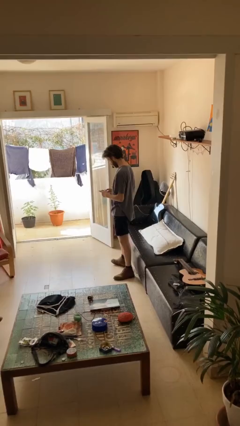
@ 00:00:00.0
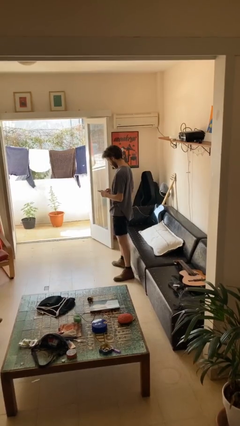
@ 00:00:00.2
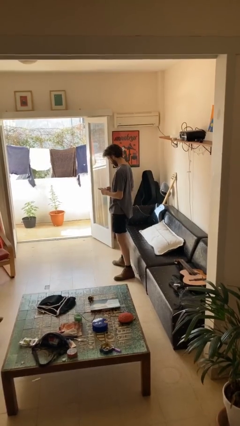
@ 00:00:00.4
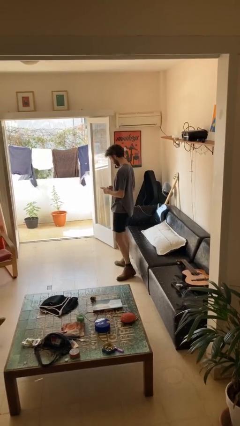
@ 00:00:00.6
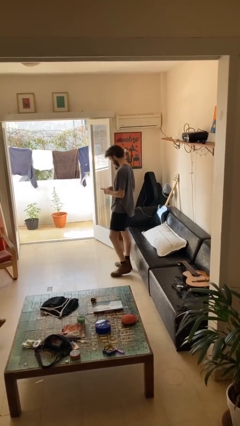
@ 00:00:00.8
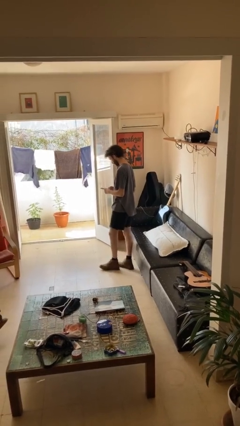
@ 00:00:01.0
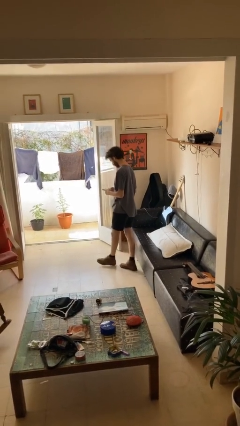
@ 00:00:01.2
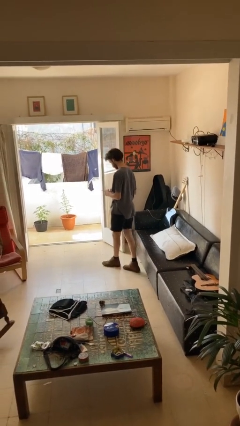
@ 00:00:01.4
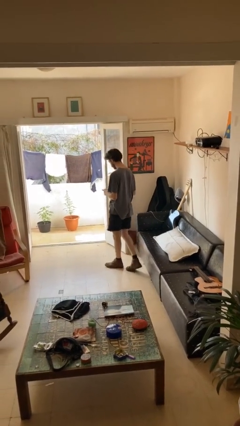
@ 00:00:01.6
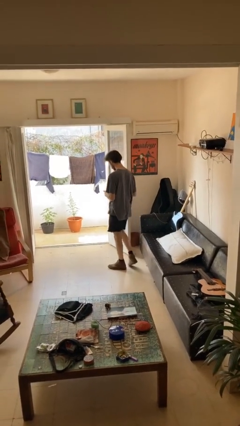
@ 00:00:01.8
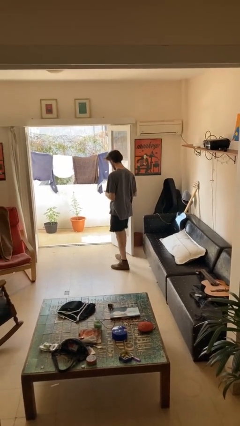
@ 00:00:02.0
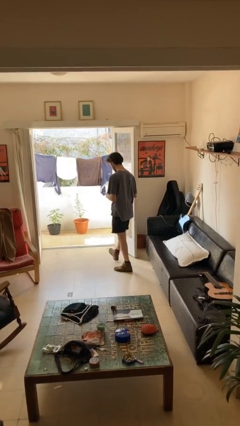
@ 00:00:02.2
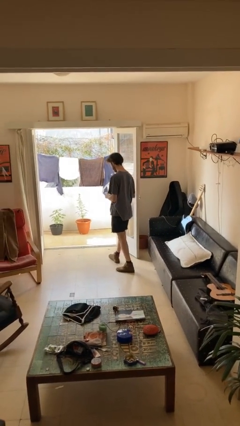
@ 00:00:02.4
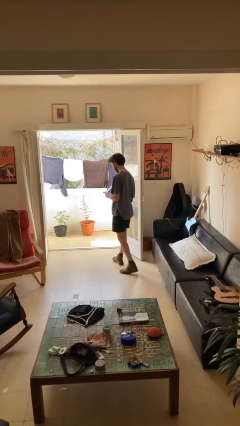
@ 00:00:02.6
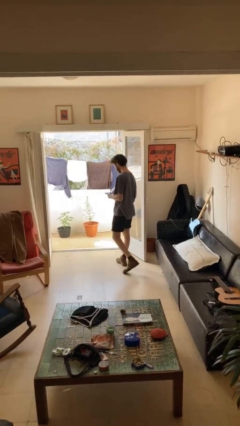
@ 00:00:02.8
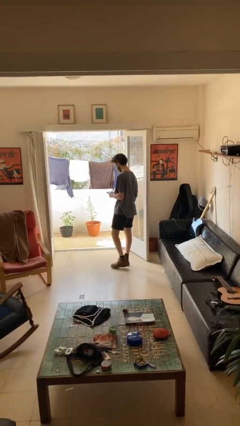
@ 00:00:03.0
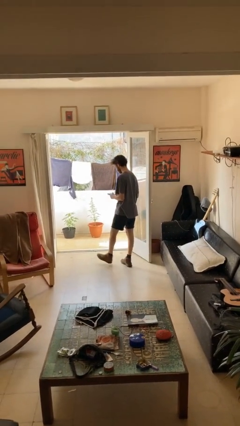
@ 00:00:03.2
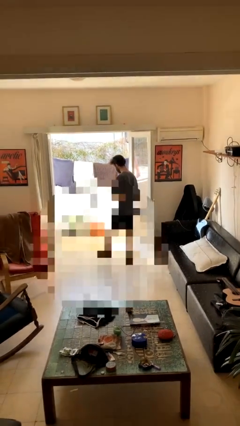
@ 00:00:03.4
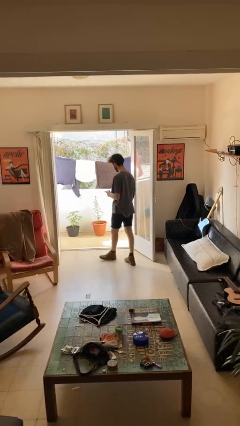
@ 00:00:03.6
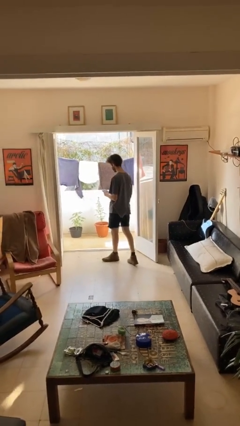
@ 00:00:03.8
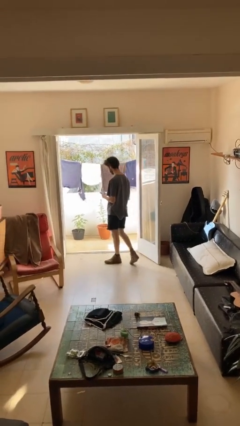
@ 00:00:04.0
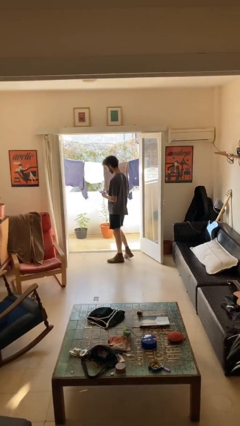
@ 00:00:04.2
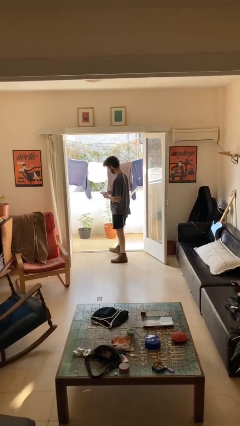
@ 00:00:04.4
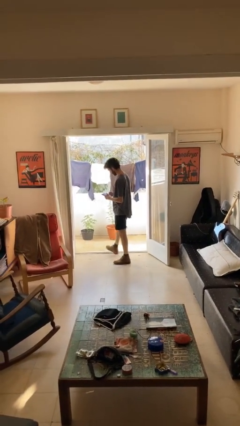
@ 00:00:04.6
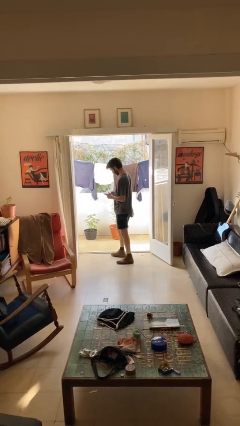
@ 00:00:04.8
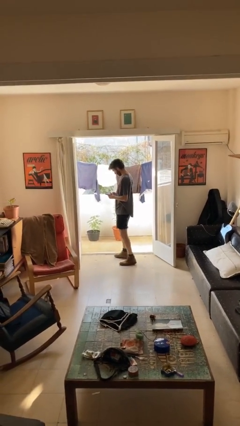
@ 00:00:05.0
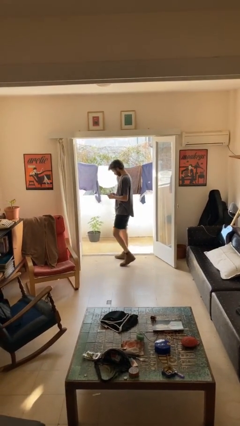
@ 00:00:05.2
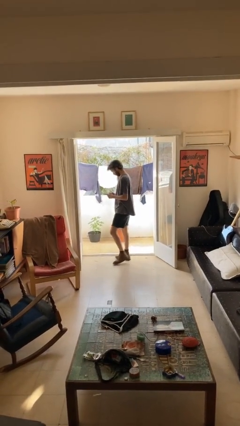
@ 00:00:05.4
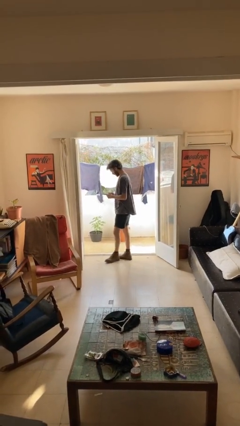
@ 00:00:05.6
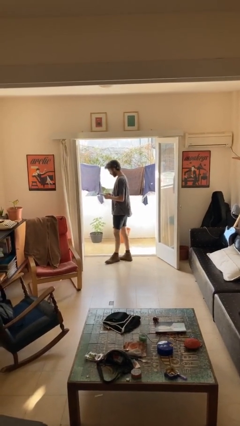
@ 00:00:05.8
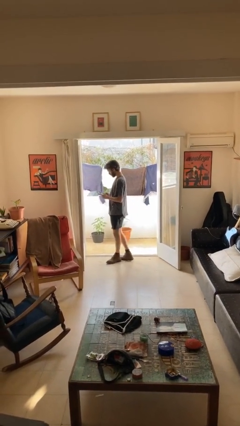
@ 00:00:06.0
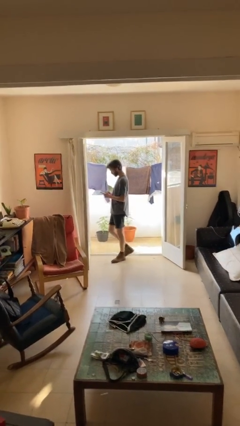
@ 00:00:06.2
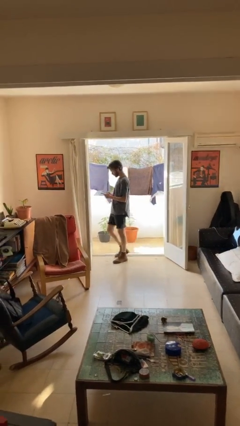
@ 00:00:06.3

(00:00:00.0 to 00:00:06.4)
person texts on phone

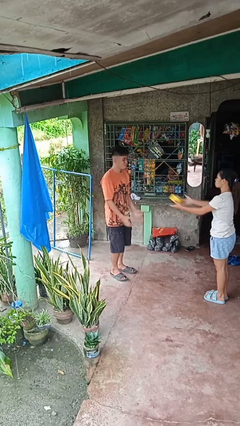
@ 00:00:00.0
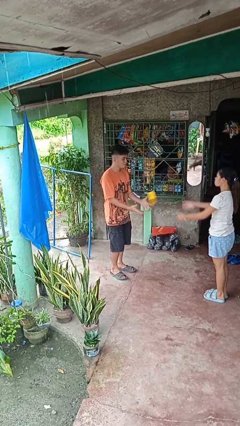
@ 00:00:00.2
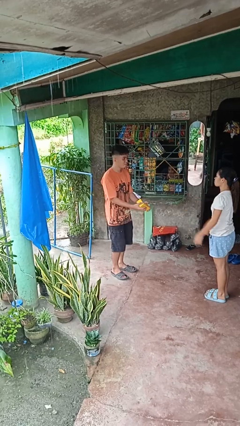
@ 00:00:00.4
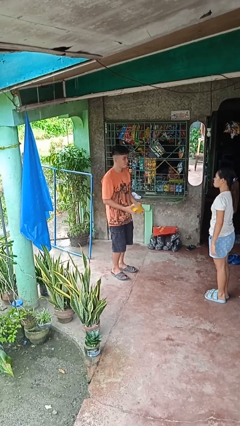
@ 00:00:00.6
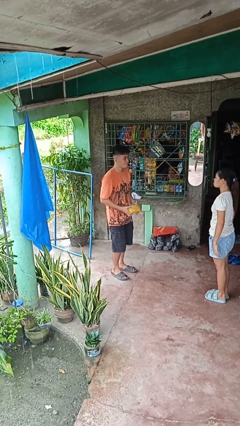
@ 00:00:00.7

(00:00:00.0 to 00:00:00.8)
person catches object from person

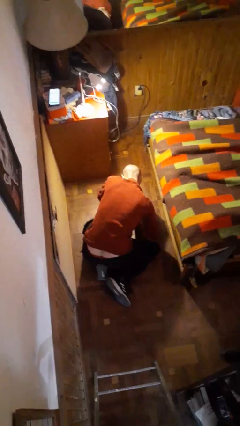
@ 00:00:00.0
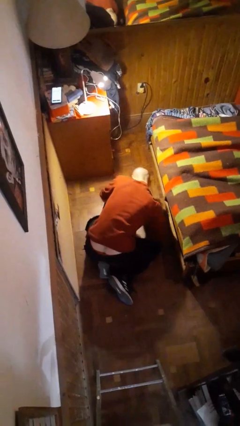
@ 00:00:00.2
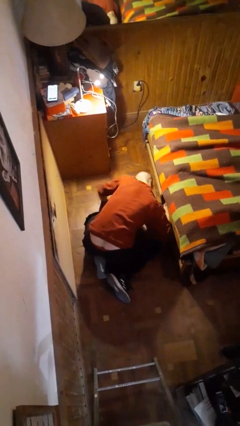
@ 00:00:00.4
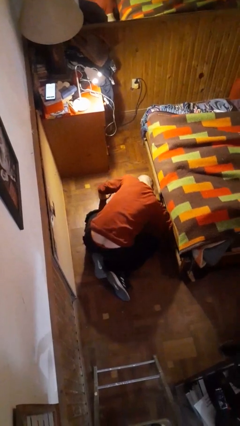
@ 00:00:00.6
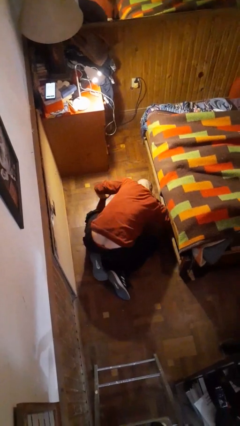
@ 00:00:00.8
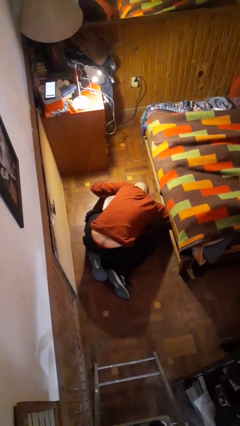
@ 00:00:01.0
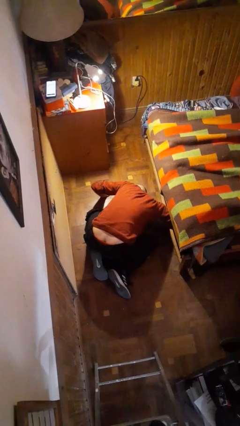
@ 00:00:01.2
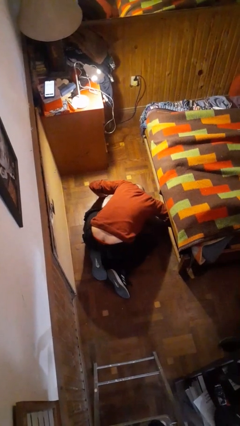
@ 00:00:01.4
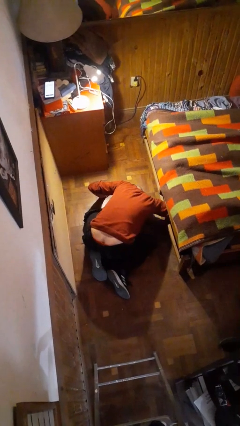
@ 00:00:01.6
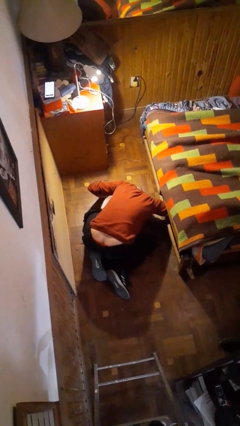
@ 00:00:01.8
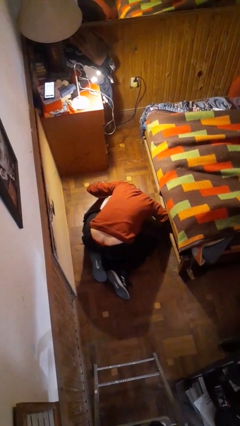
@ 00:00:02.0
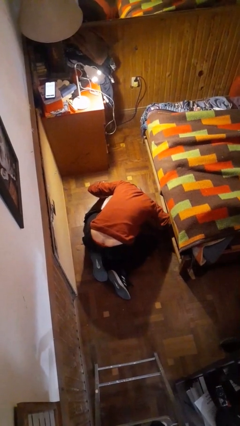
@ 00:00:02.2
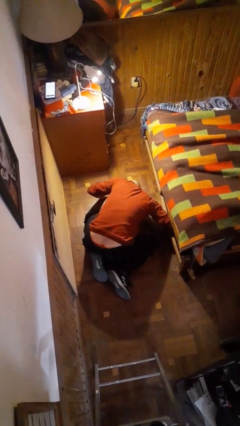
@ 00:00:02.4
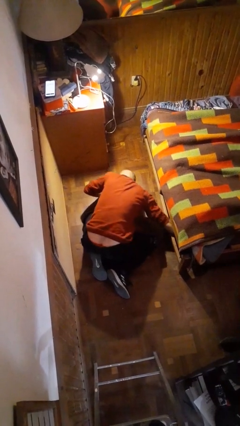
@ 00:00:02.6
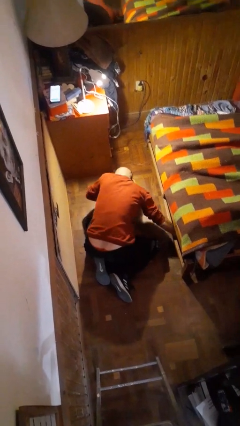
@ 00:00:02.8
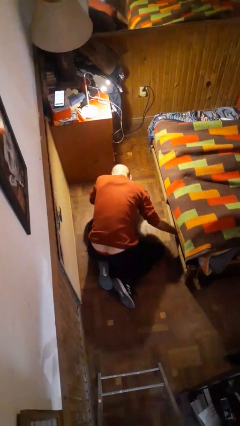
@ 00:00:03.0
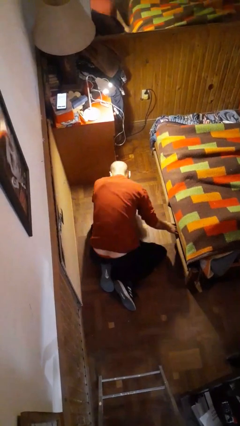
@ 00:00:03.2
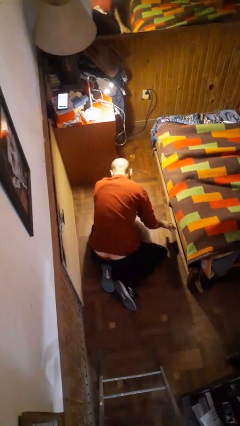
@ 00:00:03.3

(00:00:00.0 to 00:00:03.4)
person searches under bed

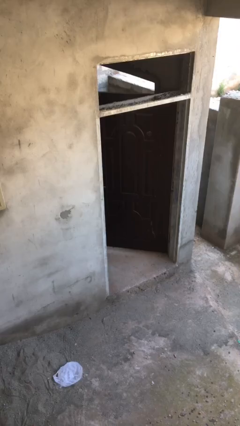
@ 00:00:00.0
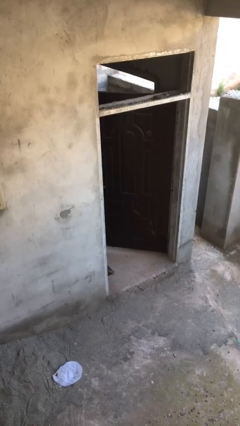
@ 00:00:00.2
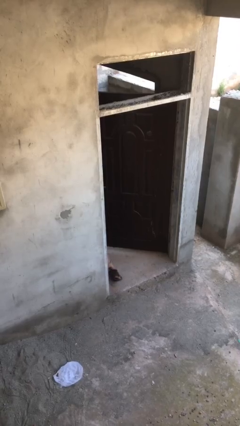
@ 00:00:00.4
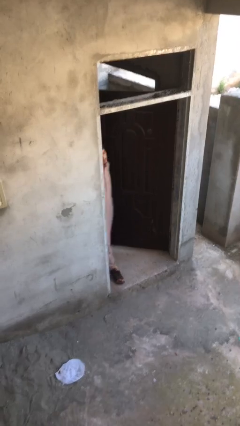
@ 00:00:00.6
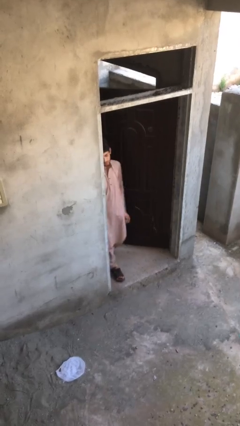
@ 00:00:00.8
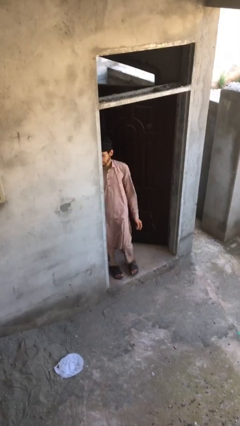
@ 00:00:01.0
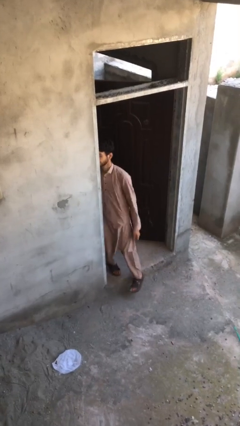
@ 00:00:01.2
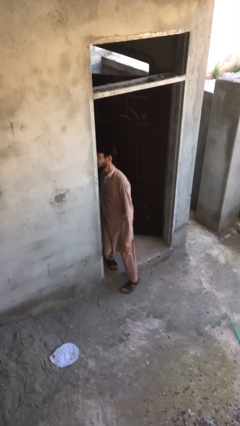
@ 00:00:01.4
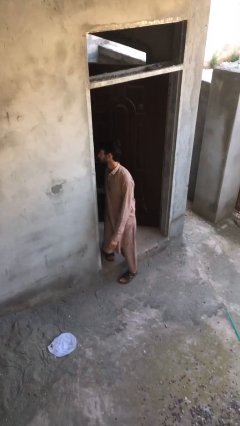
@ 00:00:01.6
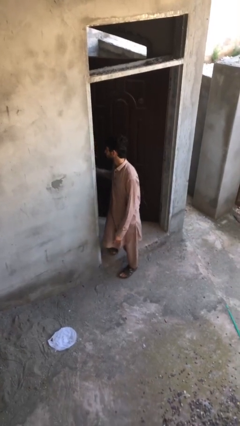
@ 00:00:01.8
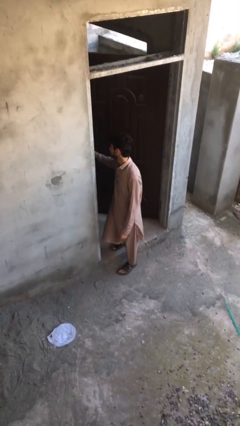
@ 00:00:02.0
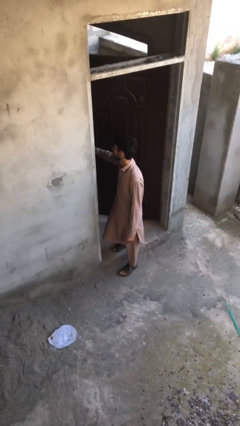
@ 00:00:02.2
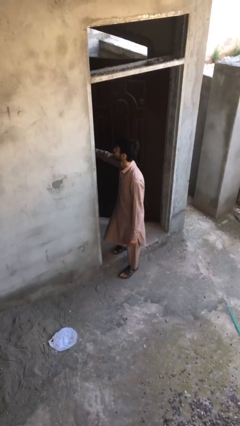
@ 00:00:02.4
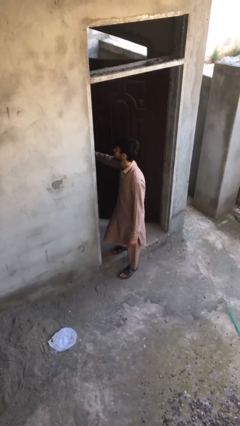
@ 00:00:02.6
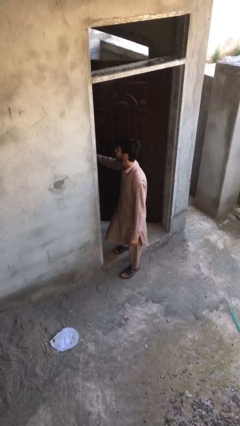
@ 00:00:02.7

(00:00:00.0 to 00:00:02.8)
person enters scene through structure

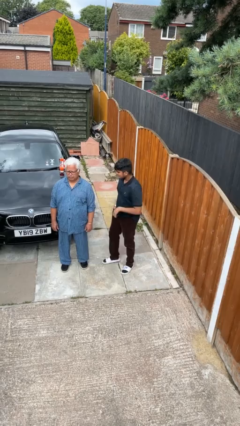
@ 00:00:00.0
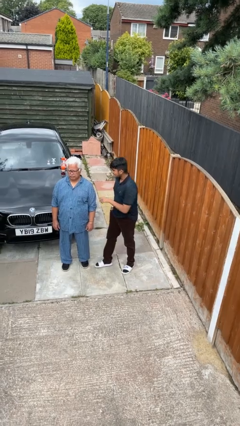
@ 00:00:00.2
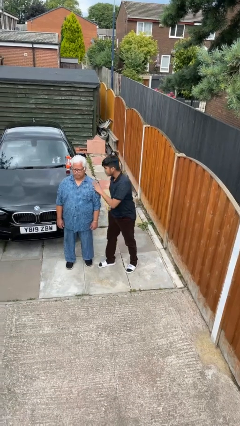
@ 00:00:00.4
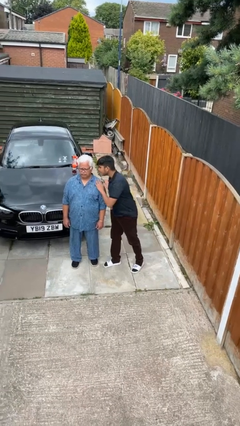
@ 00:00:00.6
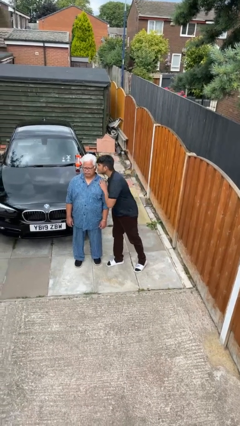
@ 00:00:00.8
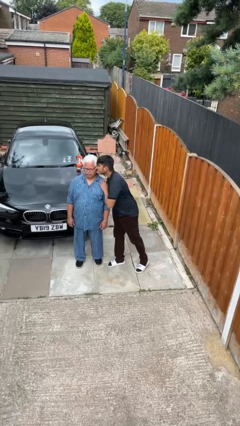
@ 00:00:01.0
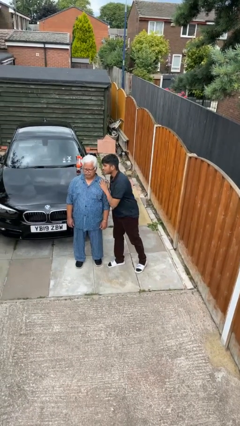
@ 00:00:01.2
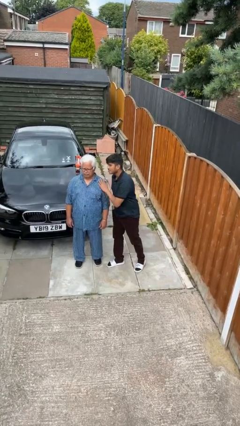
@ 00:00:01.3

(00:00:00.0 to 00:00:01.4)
person kisses cheek of person

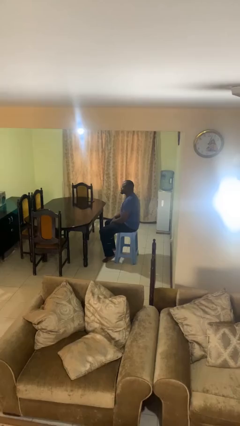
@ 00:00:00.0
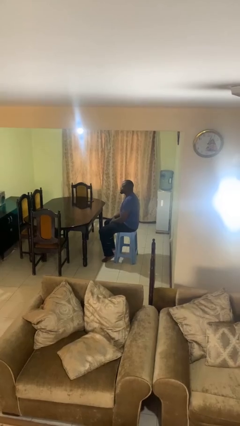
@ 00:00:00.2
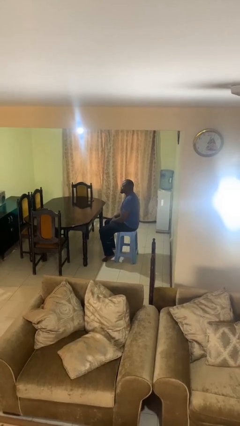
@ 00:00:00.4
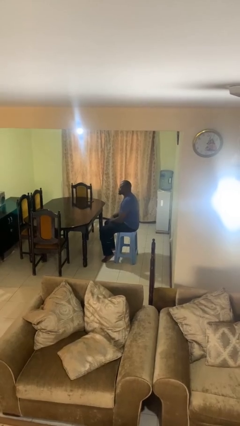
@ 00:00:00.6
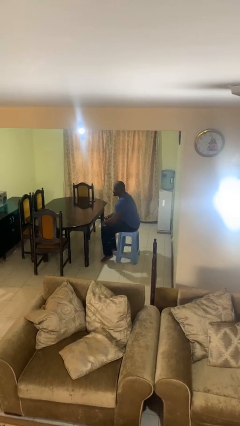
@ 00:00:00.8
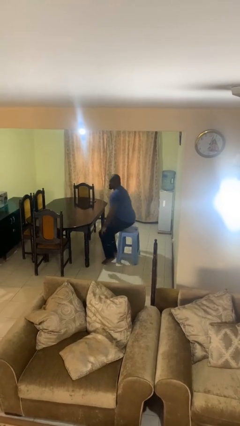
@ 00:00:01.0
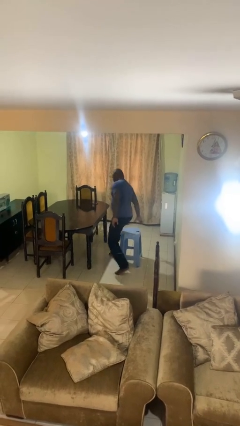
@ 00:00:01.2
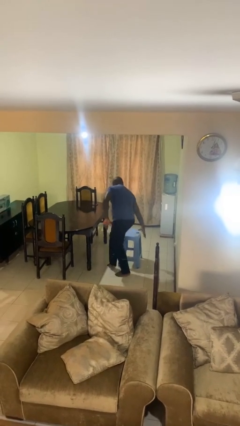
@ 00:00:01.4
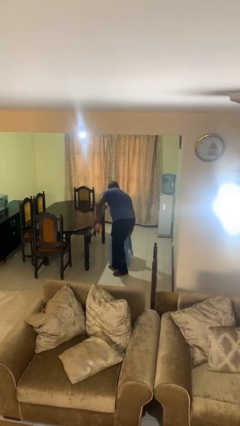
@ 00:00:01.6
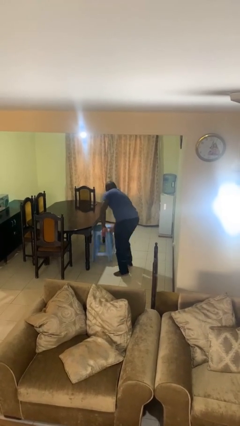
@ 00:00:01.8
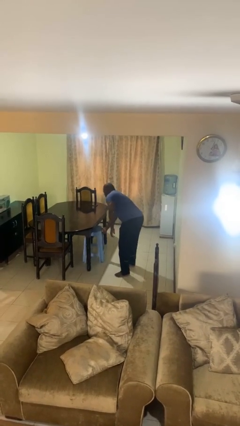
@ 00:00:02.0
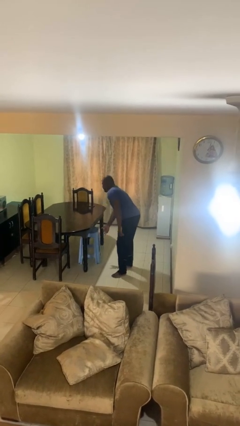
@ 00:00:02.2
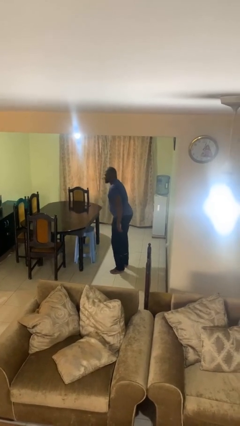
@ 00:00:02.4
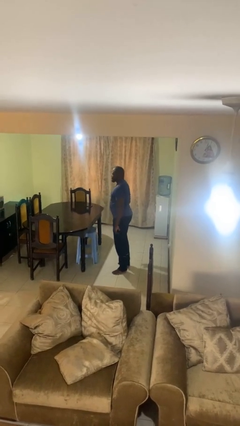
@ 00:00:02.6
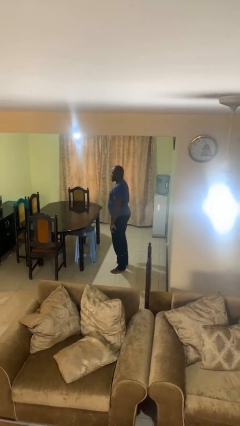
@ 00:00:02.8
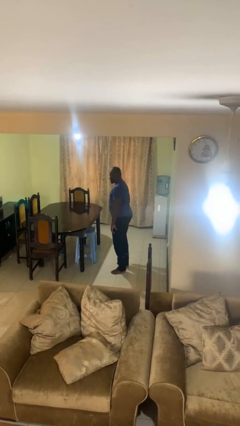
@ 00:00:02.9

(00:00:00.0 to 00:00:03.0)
person stands up
